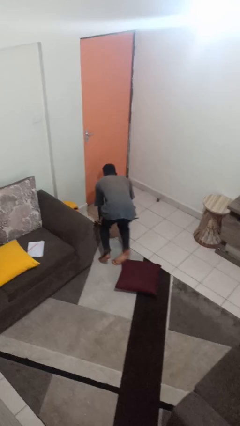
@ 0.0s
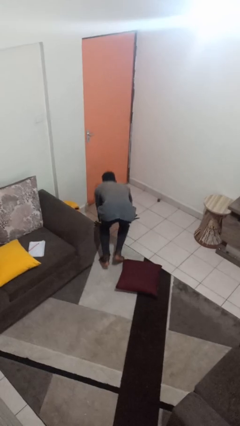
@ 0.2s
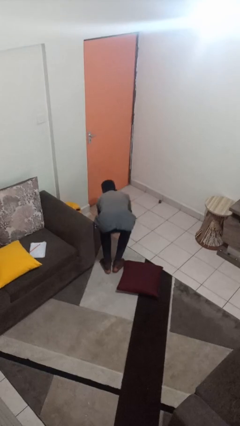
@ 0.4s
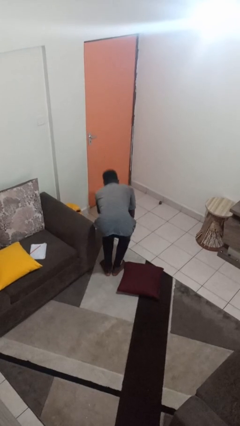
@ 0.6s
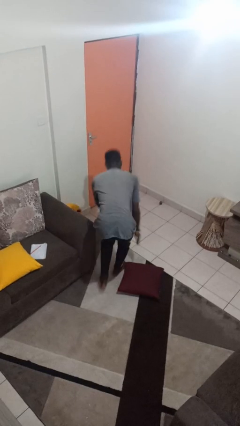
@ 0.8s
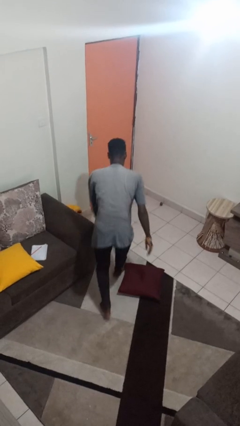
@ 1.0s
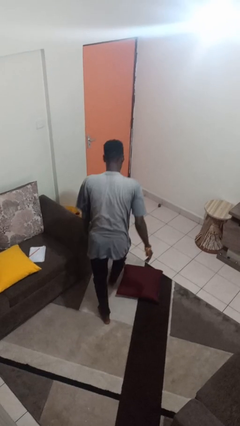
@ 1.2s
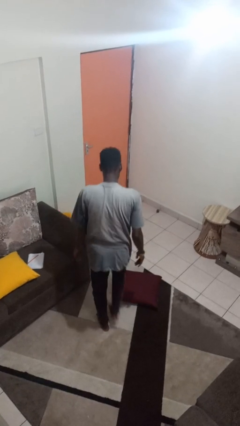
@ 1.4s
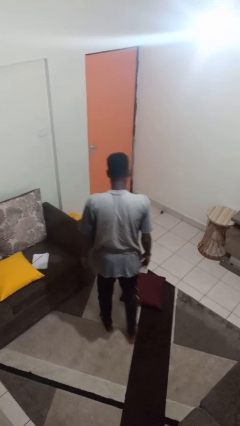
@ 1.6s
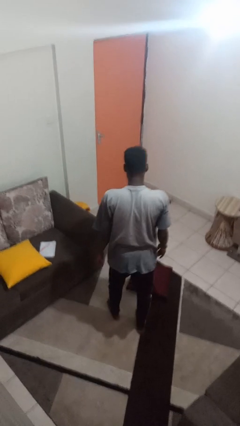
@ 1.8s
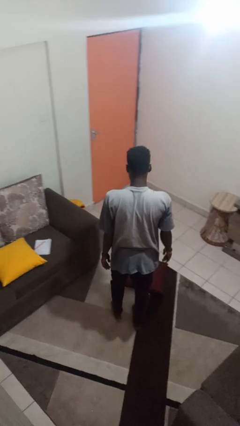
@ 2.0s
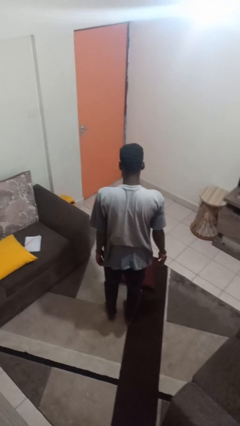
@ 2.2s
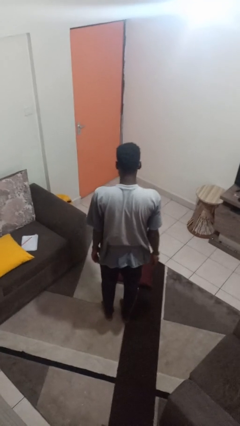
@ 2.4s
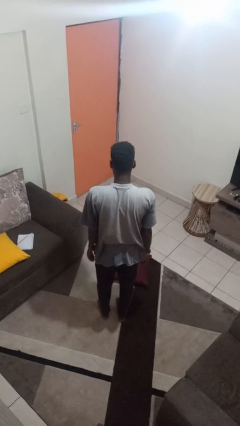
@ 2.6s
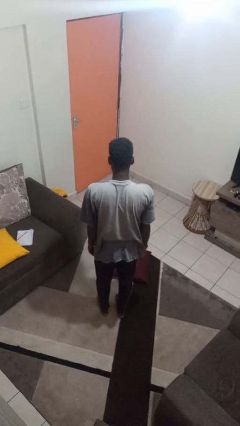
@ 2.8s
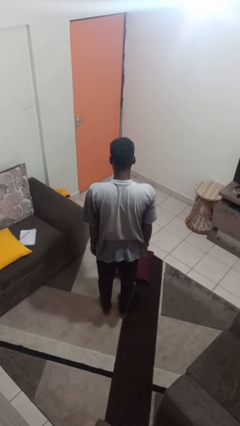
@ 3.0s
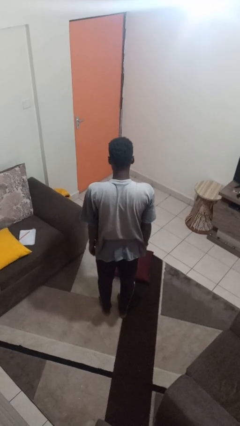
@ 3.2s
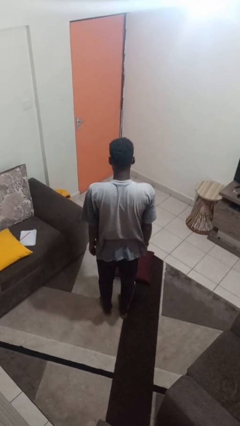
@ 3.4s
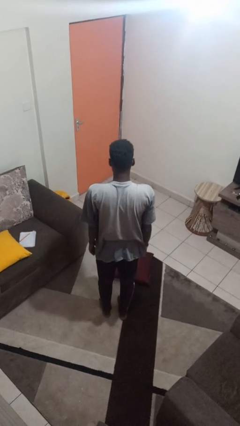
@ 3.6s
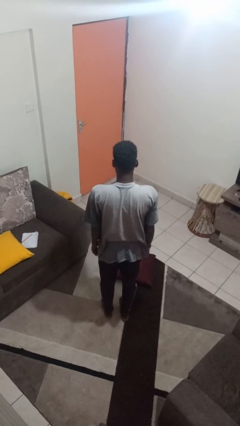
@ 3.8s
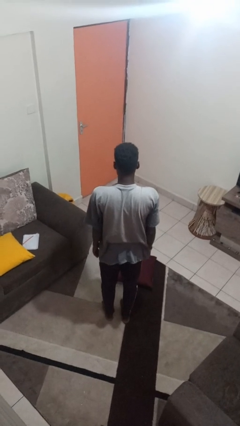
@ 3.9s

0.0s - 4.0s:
person stands up from floor

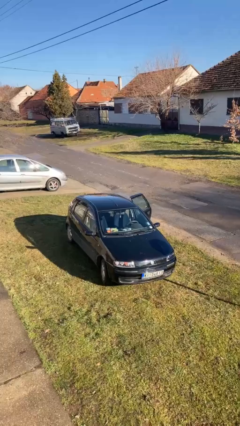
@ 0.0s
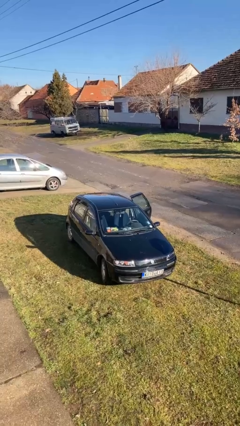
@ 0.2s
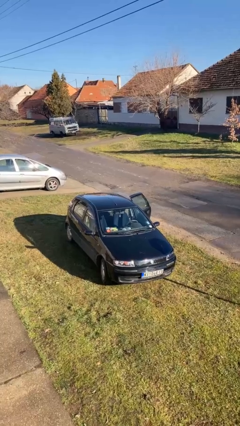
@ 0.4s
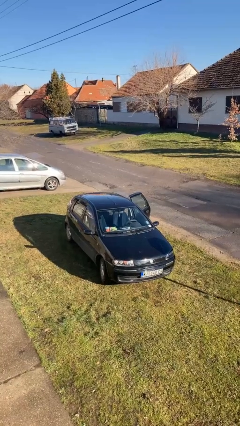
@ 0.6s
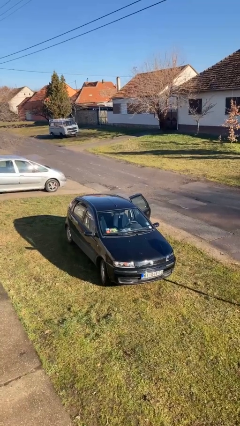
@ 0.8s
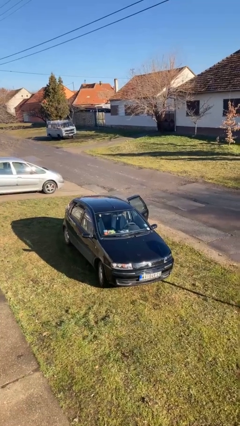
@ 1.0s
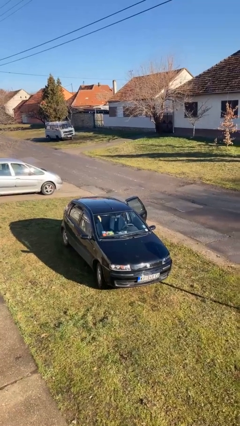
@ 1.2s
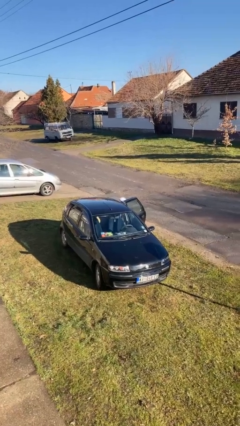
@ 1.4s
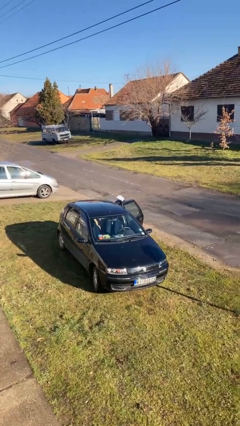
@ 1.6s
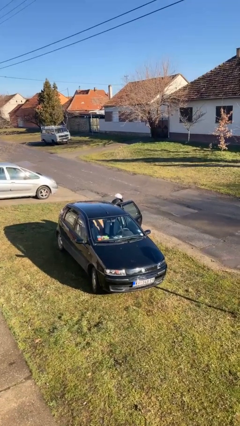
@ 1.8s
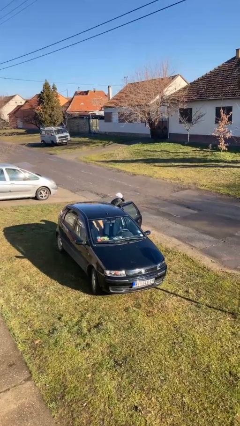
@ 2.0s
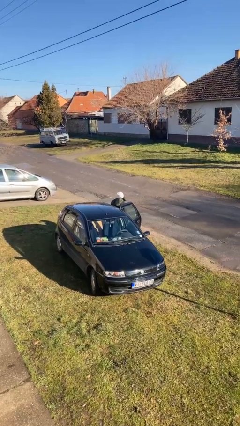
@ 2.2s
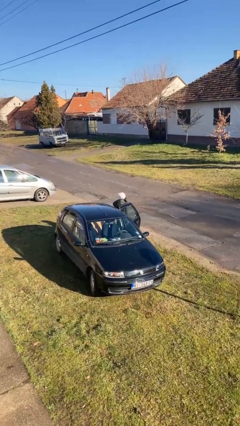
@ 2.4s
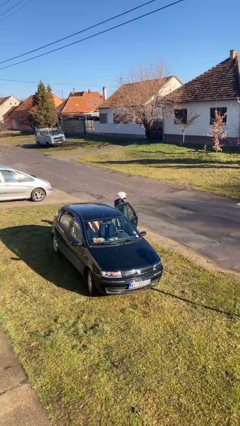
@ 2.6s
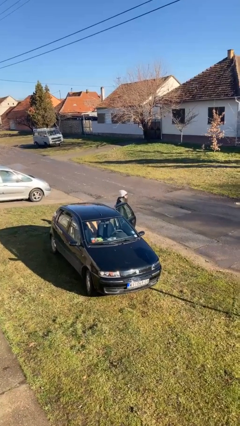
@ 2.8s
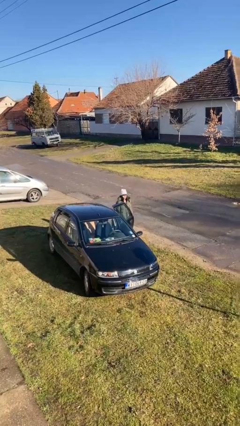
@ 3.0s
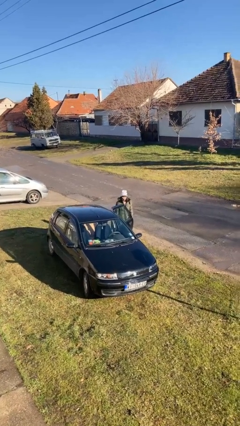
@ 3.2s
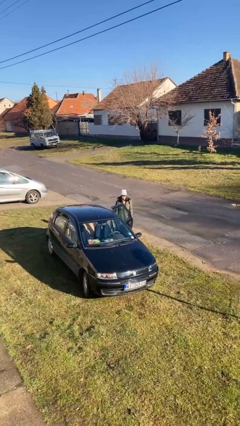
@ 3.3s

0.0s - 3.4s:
person exits car

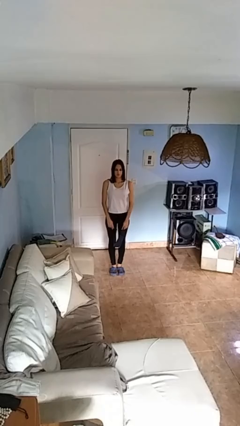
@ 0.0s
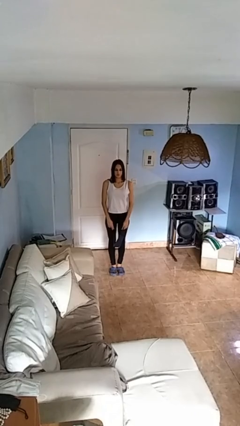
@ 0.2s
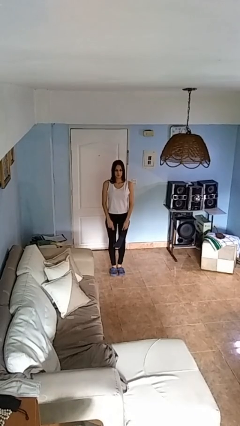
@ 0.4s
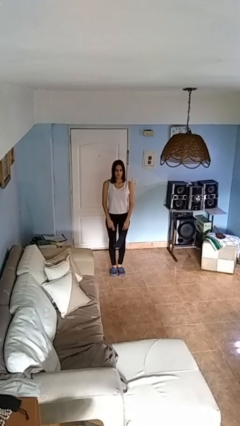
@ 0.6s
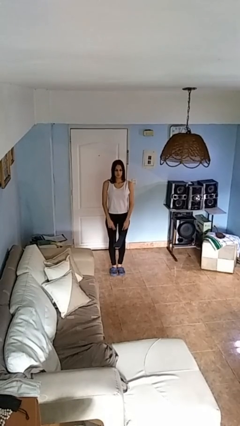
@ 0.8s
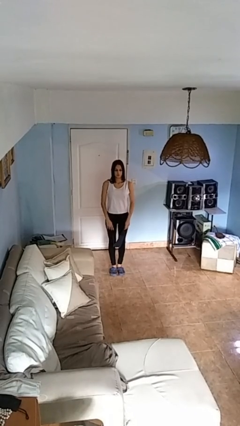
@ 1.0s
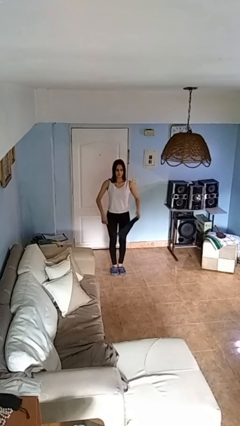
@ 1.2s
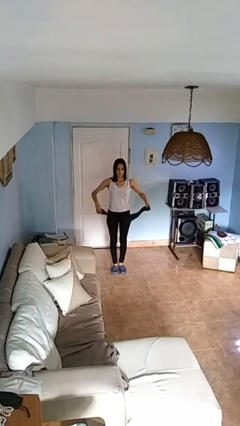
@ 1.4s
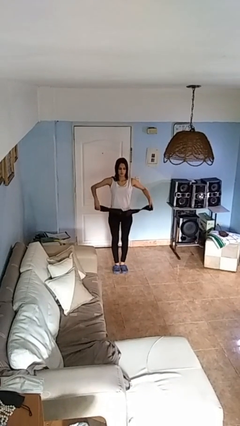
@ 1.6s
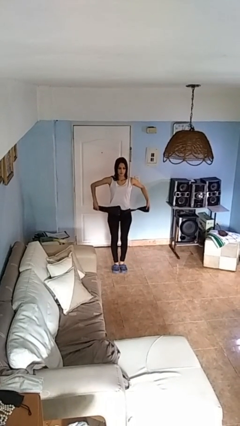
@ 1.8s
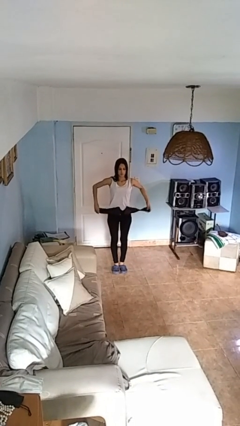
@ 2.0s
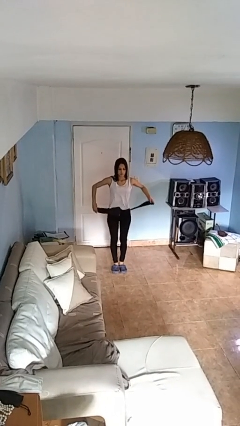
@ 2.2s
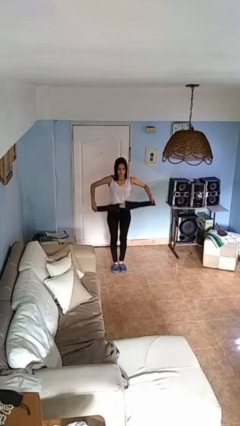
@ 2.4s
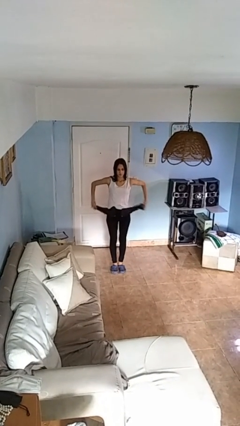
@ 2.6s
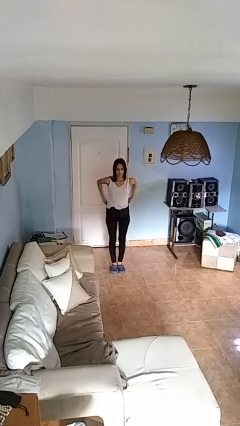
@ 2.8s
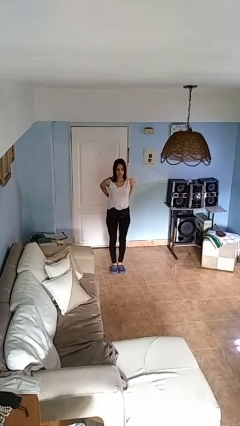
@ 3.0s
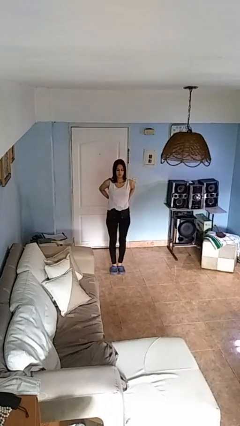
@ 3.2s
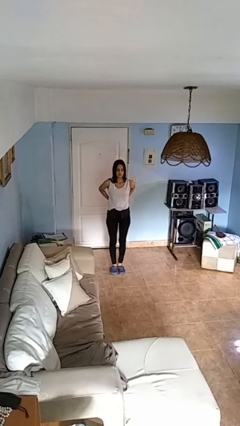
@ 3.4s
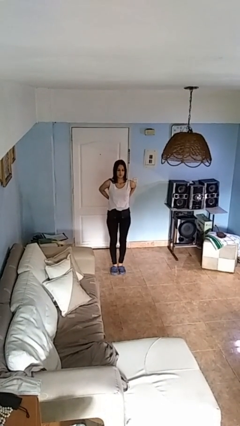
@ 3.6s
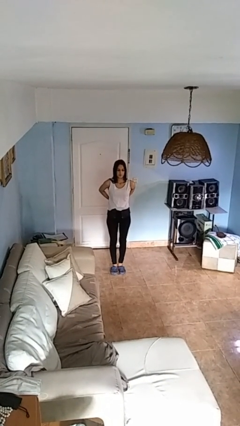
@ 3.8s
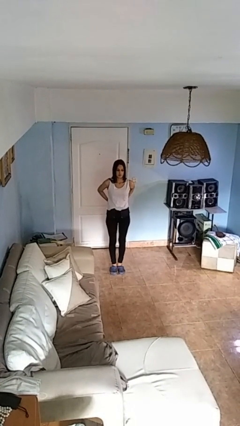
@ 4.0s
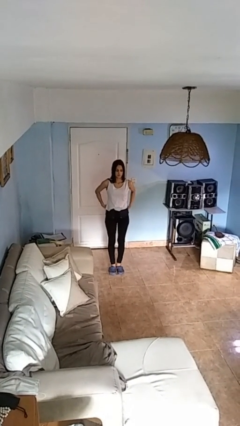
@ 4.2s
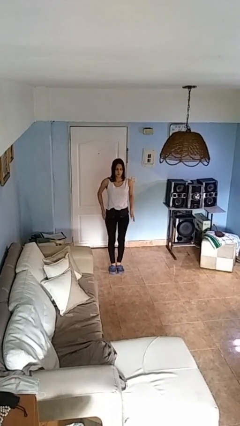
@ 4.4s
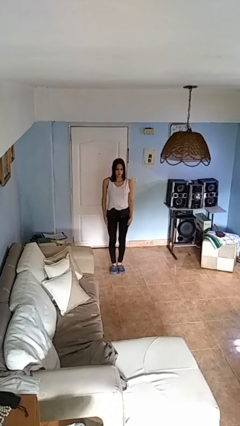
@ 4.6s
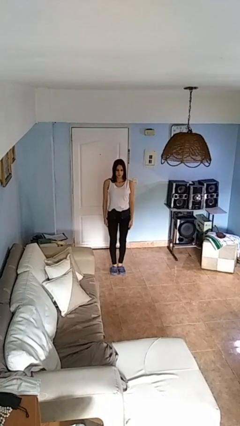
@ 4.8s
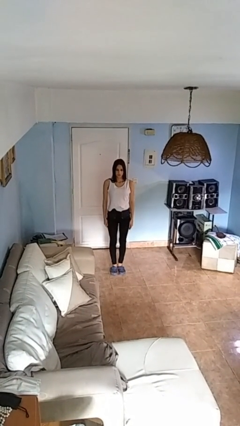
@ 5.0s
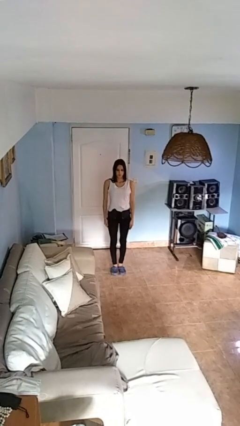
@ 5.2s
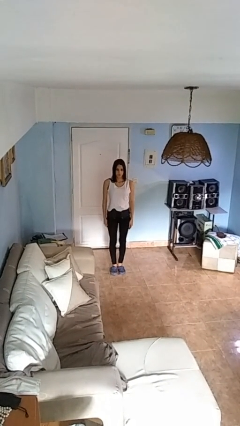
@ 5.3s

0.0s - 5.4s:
person puts on belt

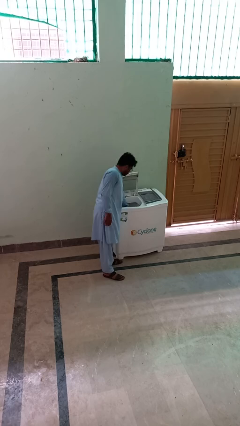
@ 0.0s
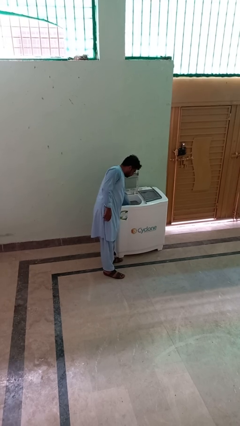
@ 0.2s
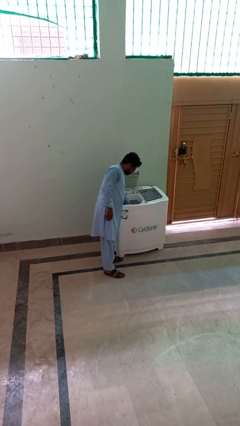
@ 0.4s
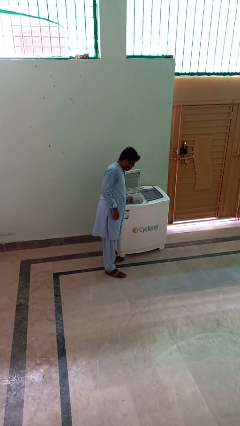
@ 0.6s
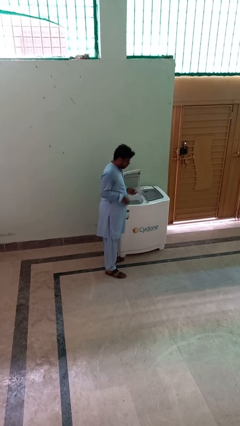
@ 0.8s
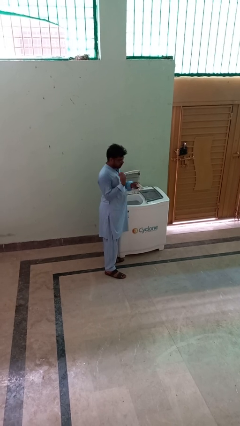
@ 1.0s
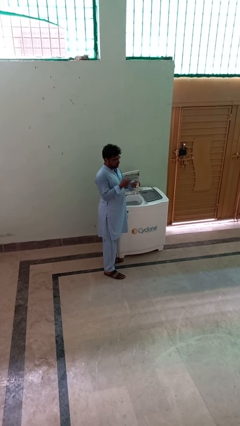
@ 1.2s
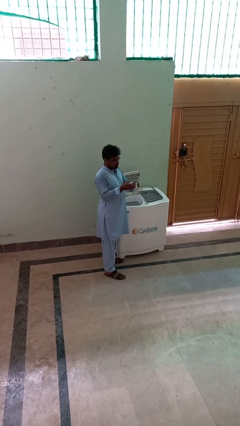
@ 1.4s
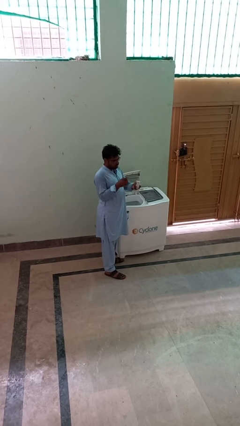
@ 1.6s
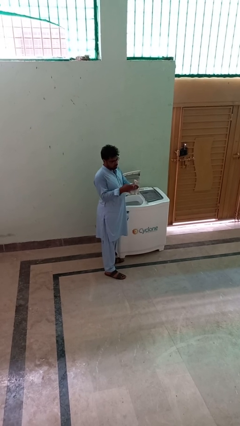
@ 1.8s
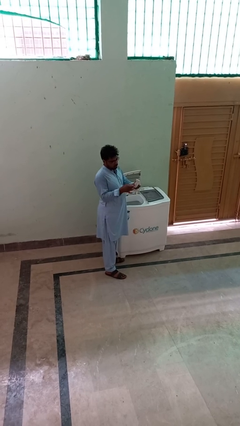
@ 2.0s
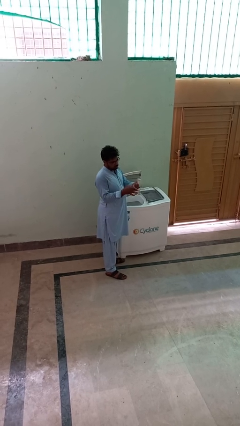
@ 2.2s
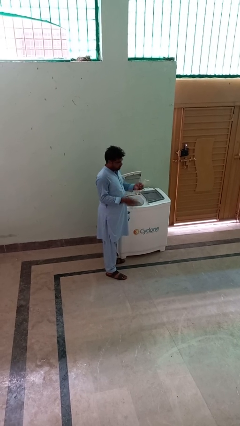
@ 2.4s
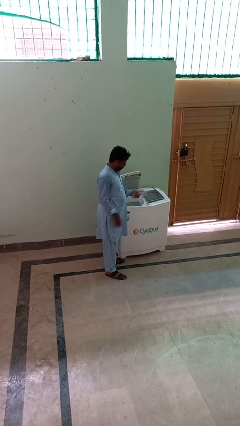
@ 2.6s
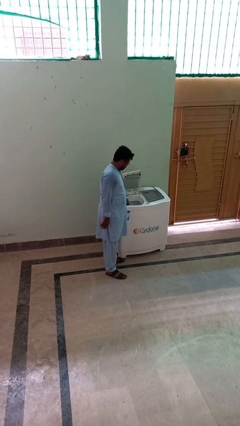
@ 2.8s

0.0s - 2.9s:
person cleans dryer lint trap

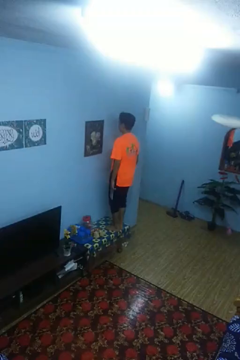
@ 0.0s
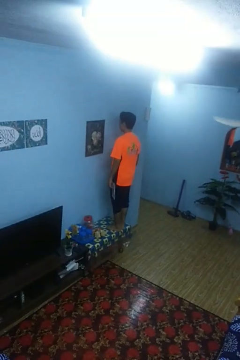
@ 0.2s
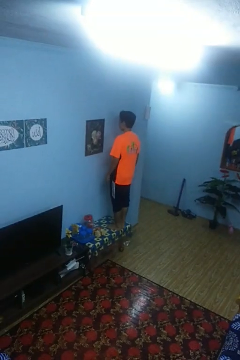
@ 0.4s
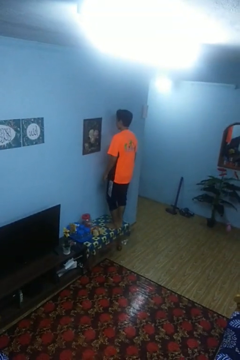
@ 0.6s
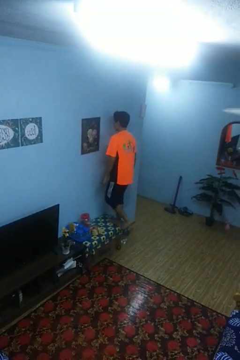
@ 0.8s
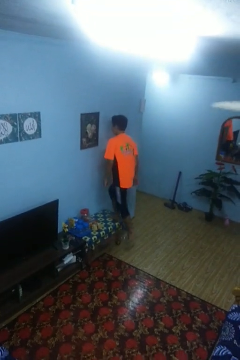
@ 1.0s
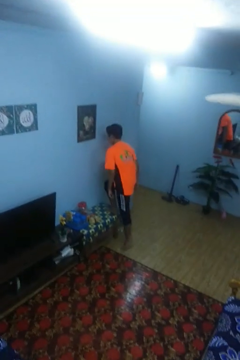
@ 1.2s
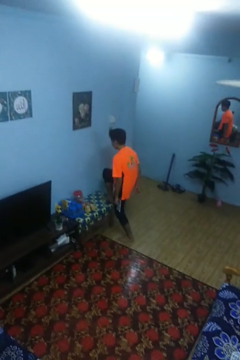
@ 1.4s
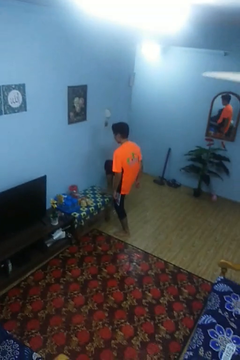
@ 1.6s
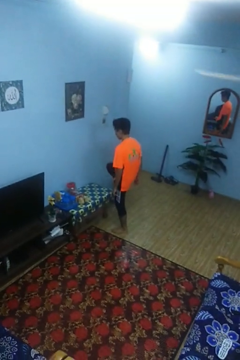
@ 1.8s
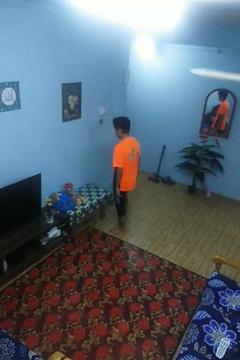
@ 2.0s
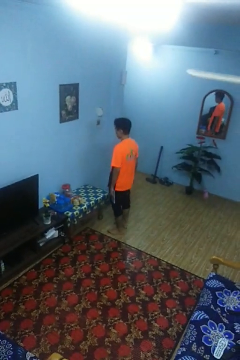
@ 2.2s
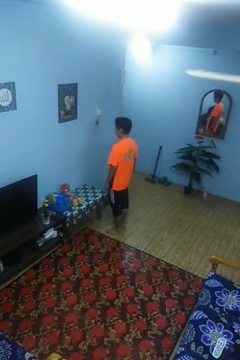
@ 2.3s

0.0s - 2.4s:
person climbs off table
